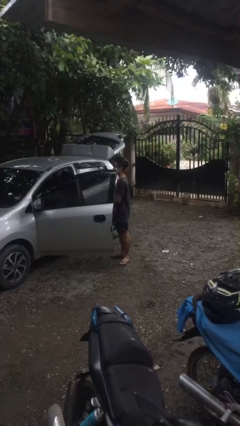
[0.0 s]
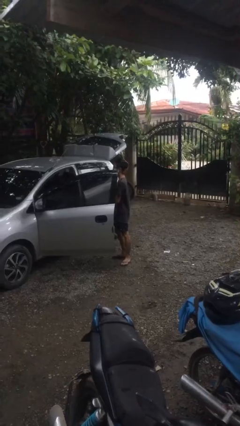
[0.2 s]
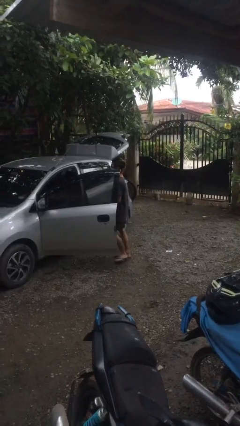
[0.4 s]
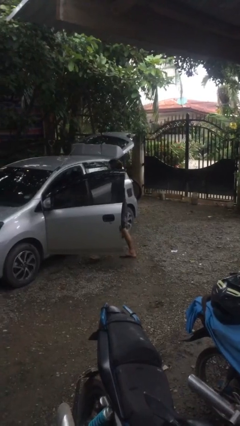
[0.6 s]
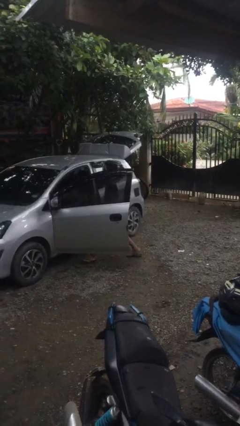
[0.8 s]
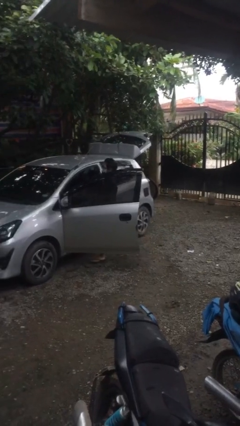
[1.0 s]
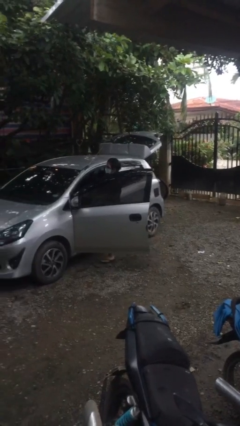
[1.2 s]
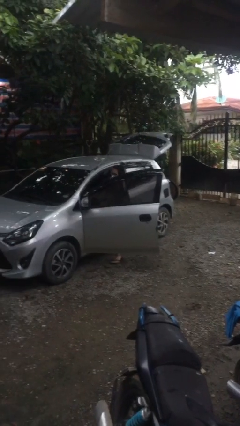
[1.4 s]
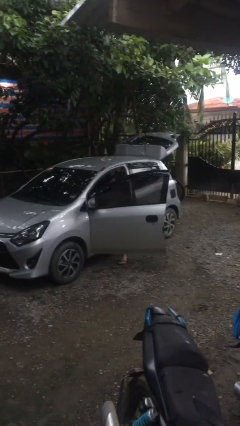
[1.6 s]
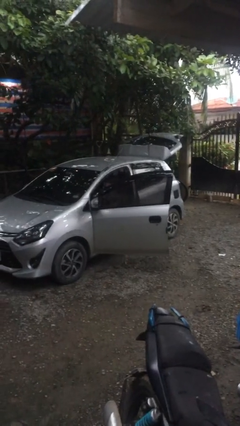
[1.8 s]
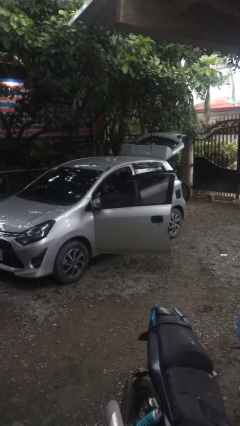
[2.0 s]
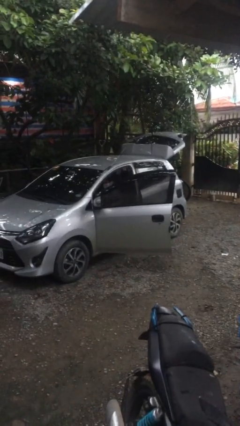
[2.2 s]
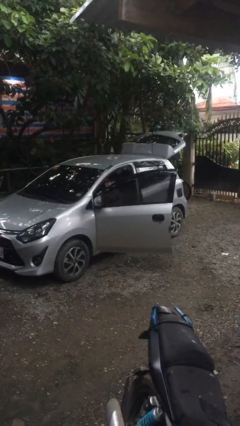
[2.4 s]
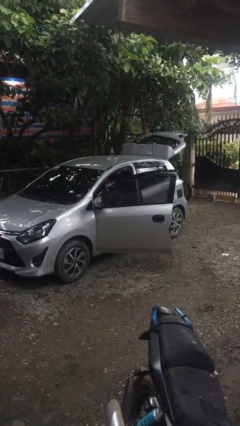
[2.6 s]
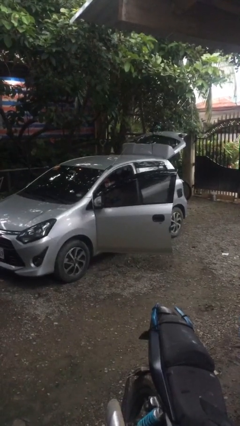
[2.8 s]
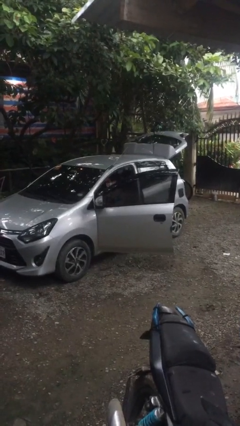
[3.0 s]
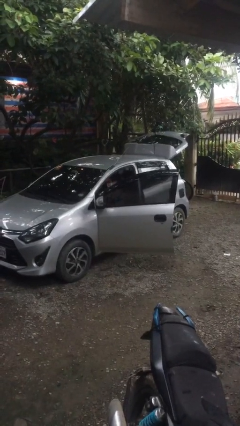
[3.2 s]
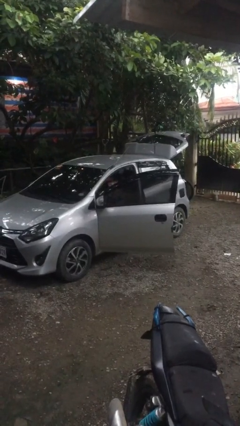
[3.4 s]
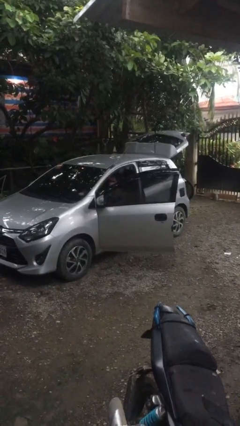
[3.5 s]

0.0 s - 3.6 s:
person enters car

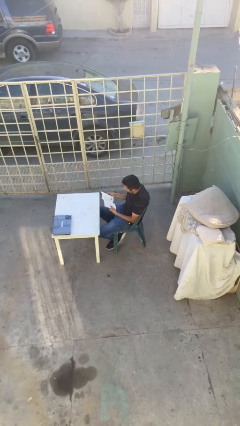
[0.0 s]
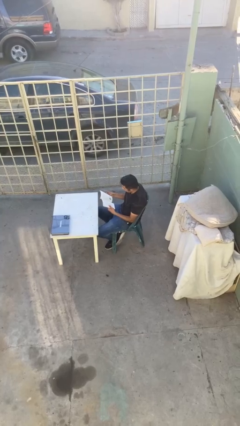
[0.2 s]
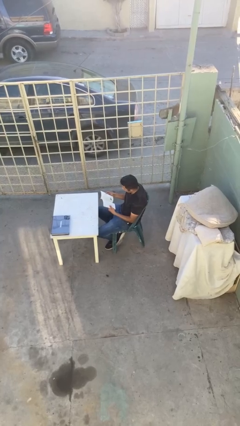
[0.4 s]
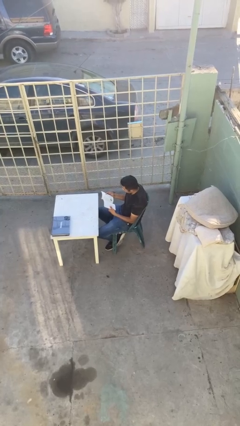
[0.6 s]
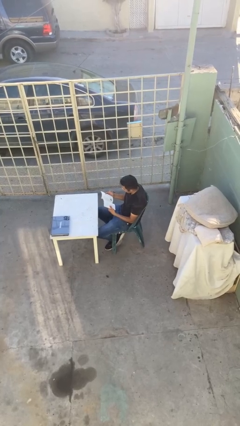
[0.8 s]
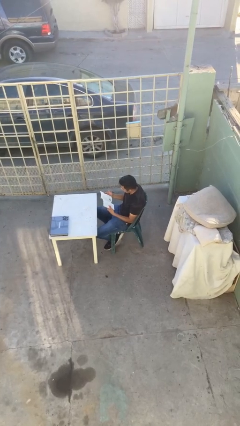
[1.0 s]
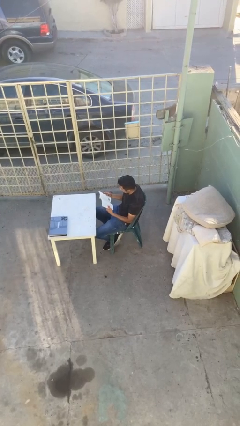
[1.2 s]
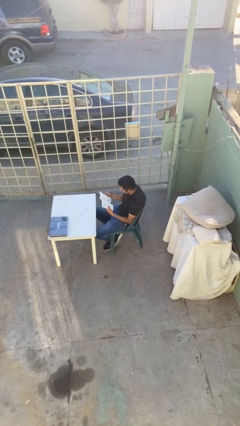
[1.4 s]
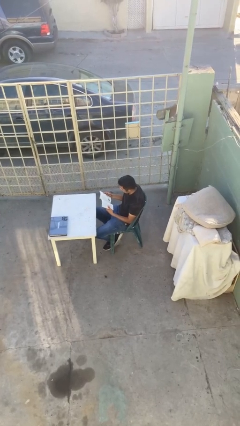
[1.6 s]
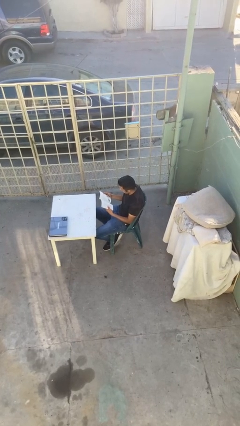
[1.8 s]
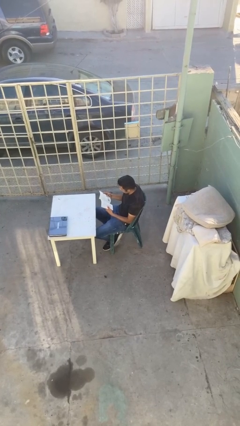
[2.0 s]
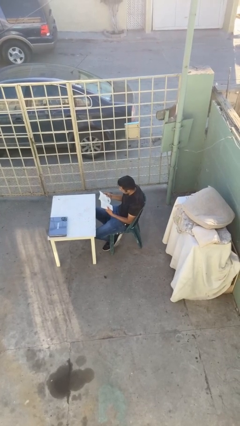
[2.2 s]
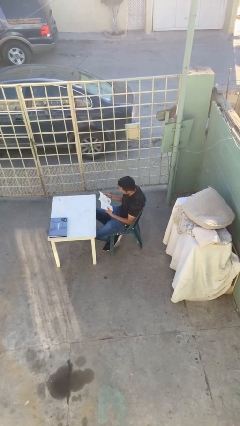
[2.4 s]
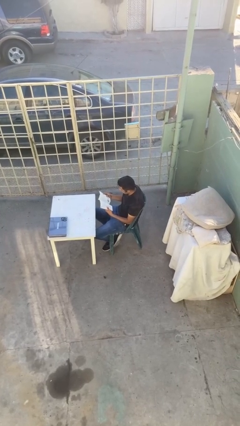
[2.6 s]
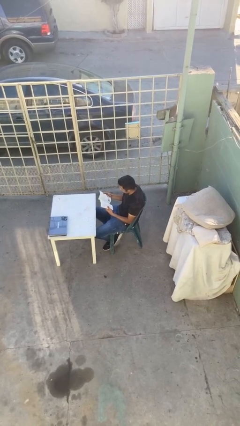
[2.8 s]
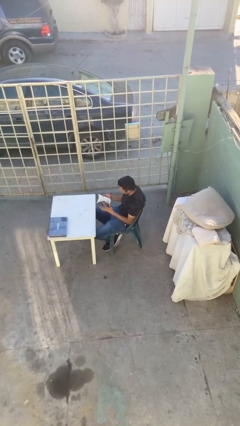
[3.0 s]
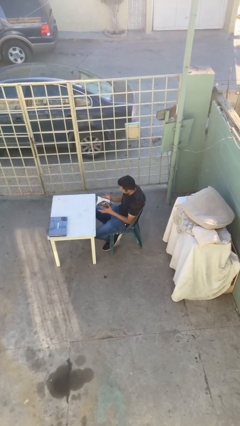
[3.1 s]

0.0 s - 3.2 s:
person reads document

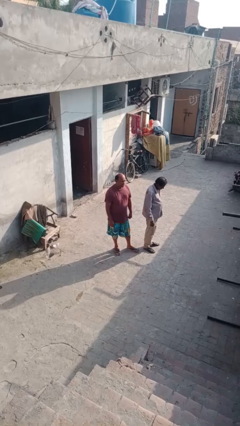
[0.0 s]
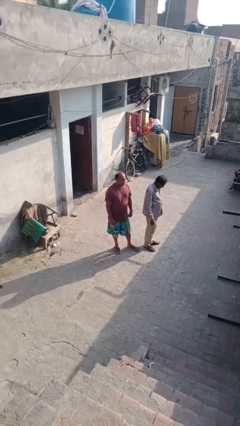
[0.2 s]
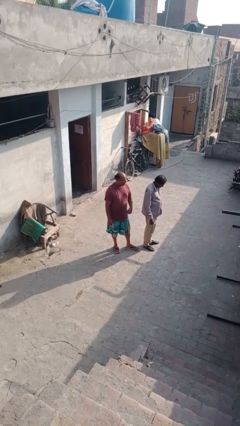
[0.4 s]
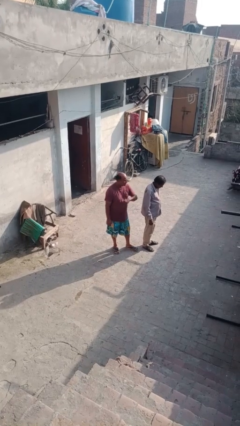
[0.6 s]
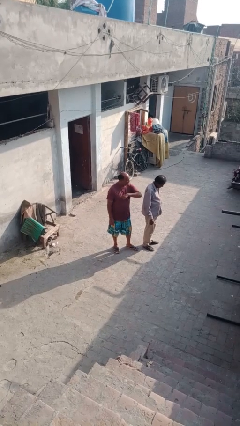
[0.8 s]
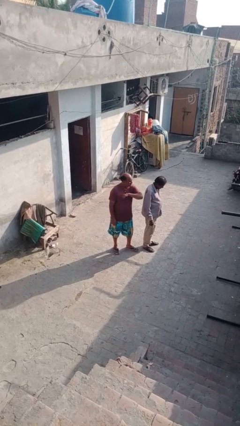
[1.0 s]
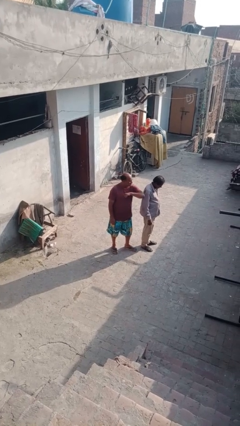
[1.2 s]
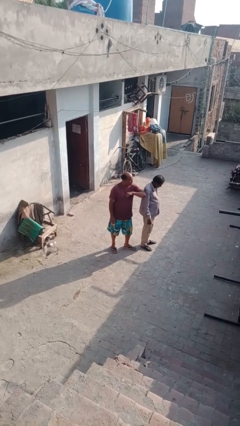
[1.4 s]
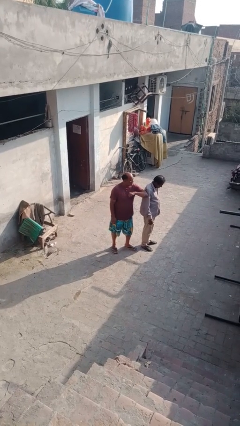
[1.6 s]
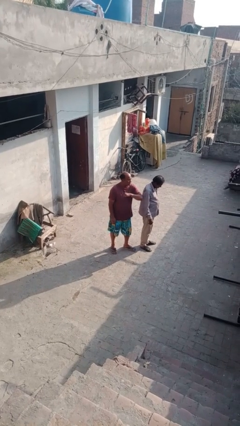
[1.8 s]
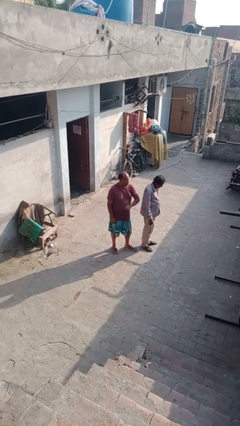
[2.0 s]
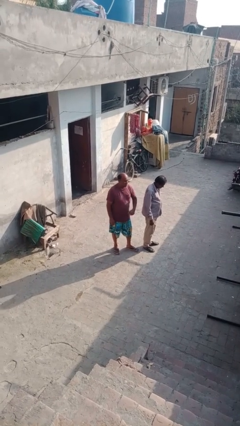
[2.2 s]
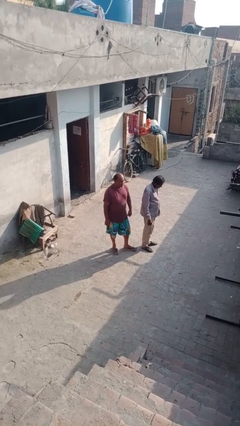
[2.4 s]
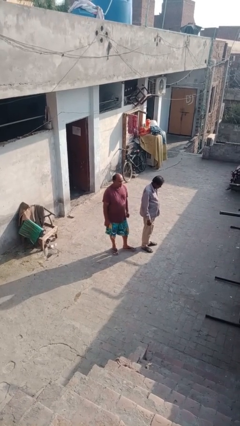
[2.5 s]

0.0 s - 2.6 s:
person nudges person with elbow

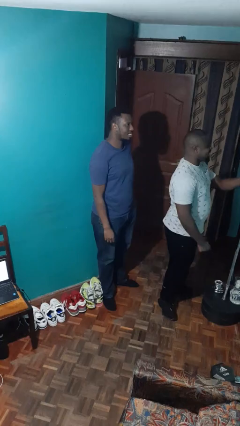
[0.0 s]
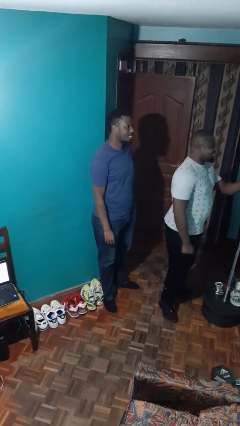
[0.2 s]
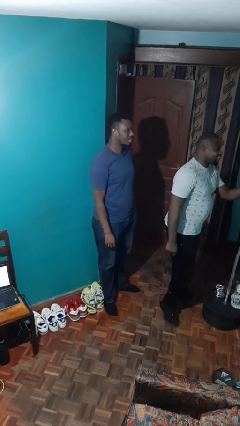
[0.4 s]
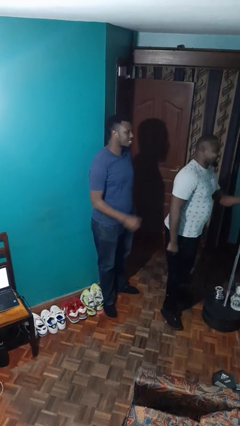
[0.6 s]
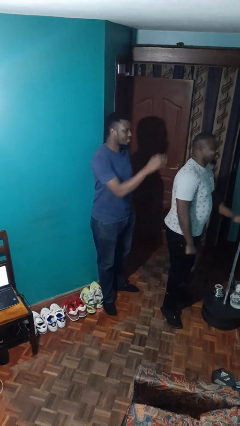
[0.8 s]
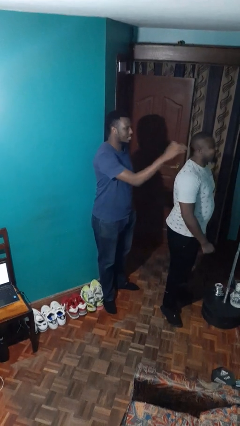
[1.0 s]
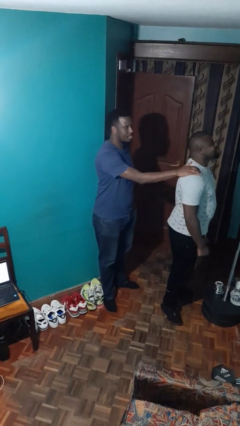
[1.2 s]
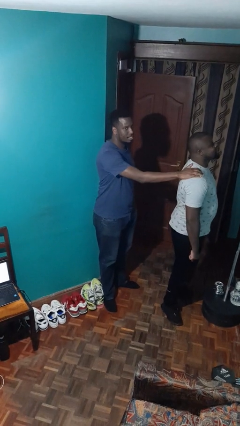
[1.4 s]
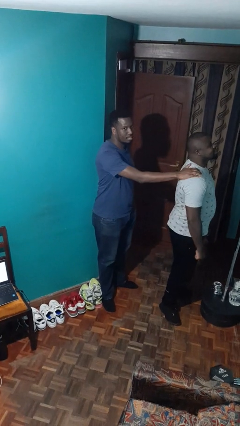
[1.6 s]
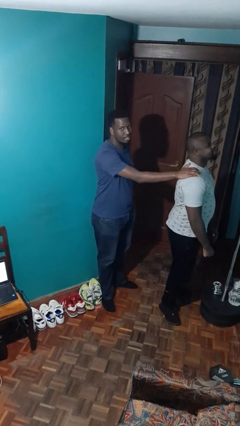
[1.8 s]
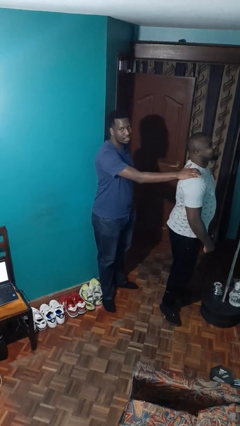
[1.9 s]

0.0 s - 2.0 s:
person grabs person by shoulder

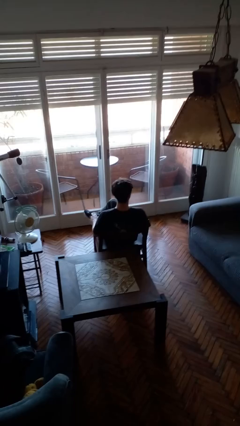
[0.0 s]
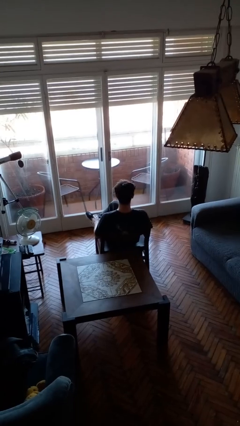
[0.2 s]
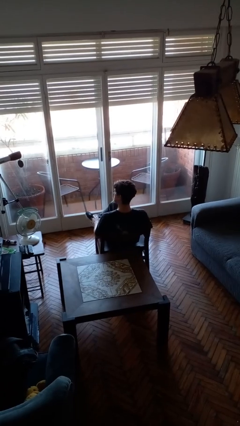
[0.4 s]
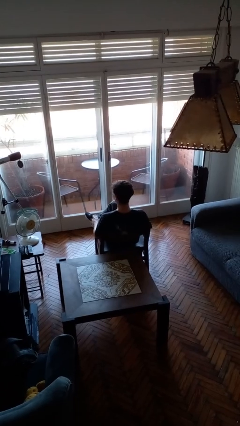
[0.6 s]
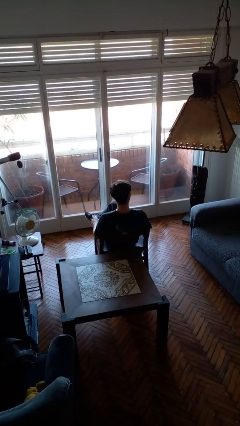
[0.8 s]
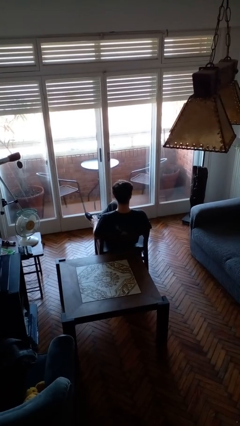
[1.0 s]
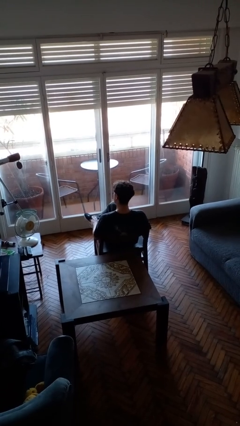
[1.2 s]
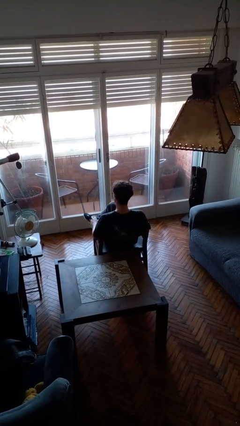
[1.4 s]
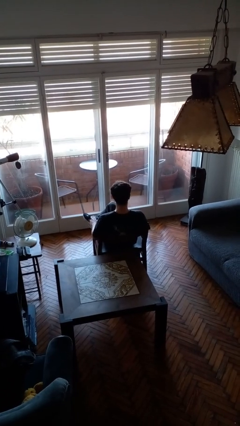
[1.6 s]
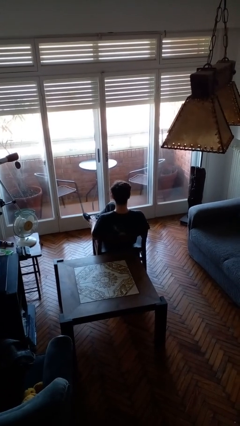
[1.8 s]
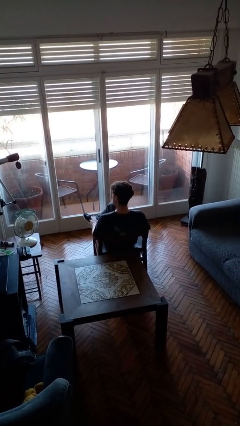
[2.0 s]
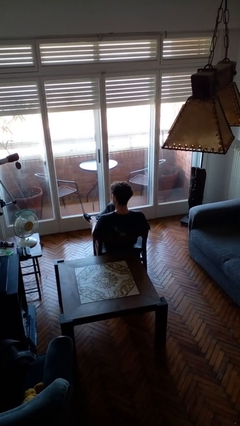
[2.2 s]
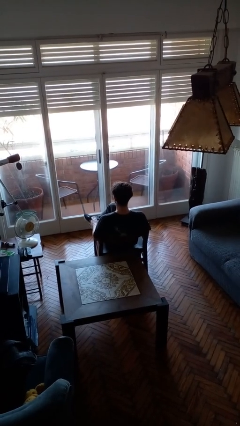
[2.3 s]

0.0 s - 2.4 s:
person shakes head

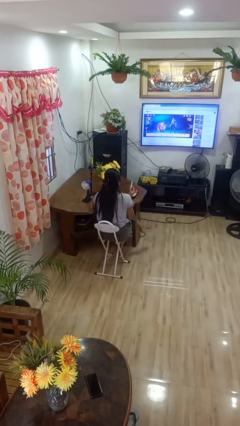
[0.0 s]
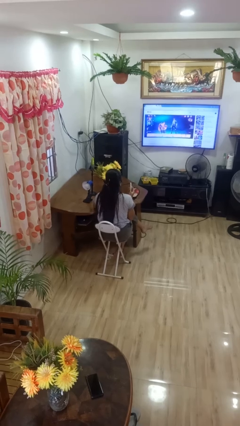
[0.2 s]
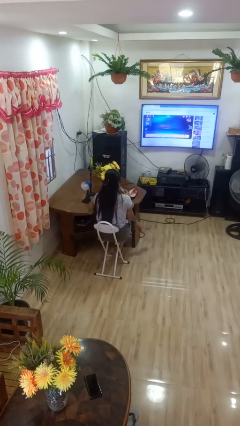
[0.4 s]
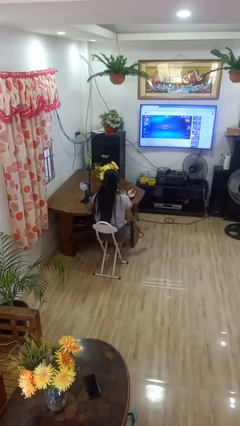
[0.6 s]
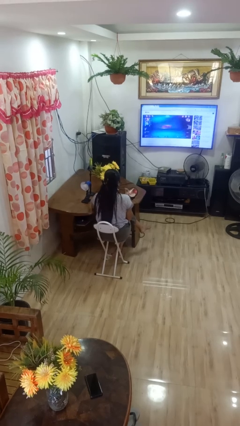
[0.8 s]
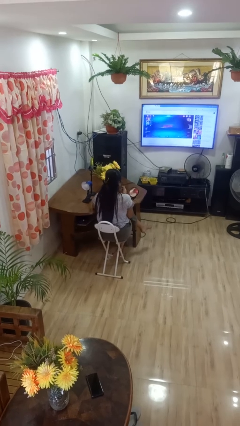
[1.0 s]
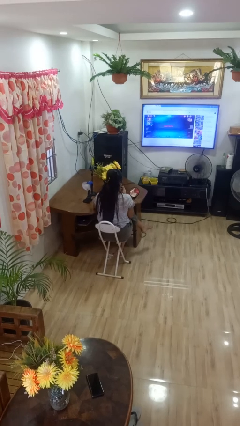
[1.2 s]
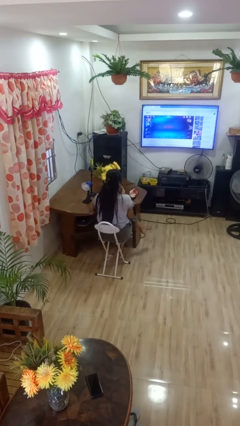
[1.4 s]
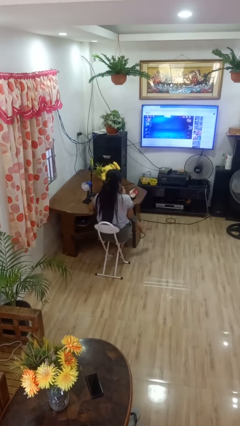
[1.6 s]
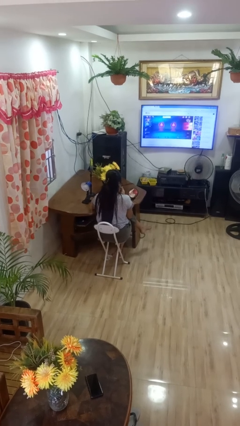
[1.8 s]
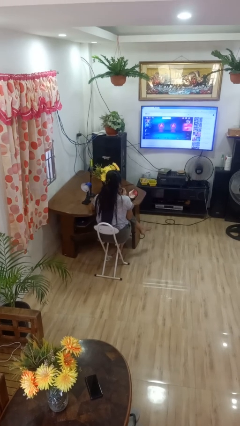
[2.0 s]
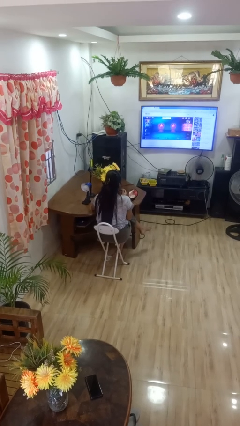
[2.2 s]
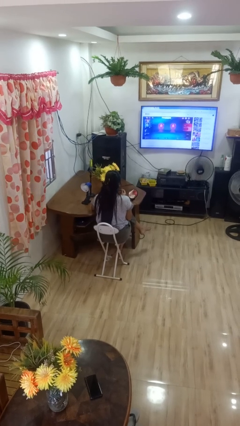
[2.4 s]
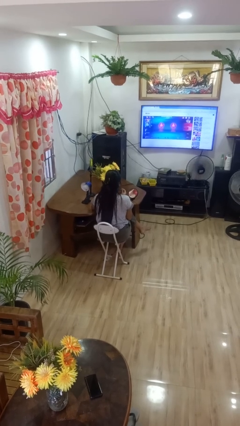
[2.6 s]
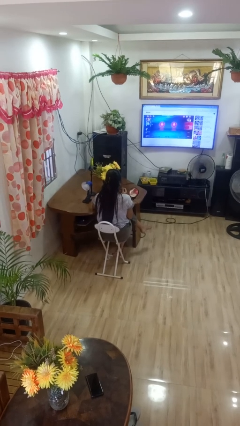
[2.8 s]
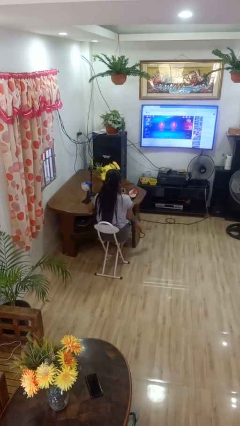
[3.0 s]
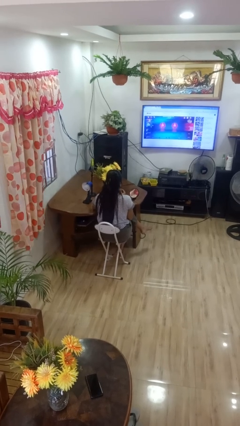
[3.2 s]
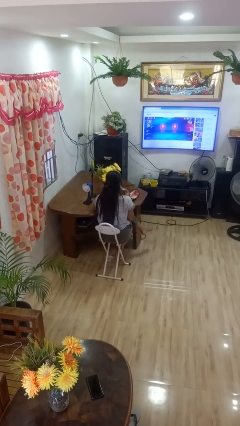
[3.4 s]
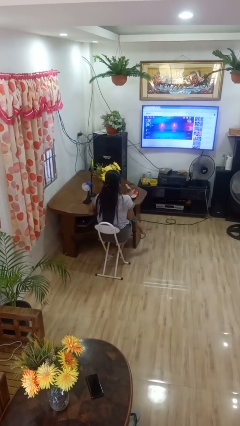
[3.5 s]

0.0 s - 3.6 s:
person applies lip makeup

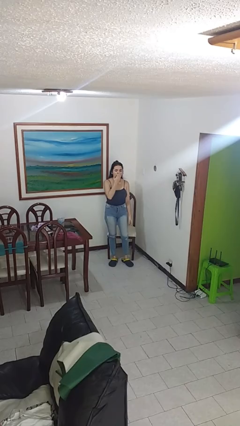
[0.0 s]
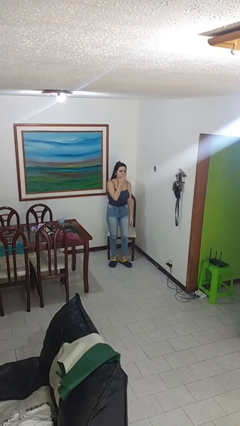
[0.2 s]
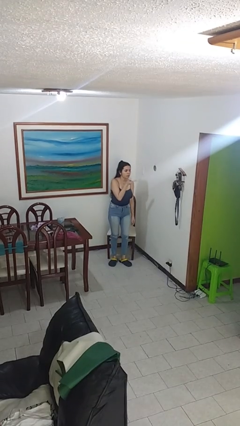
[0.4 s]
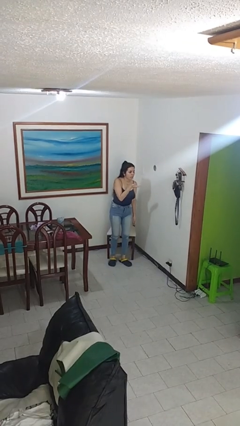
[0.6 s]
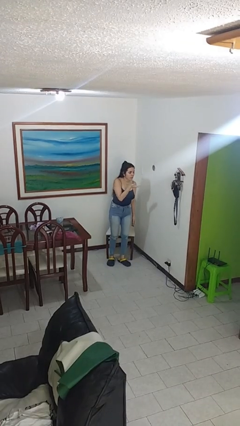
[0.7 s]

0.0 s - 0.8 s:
person gestures blow kiss
